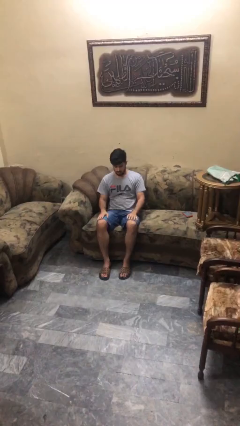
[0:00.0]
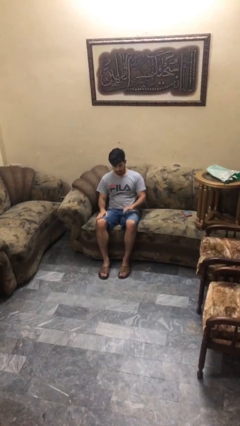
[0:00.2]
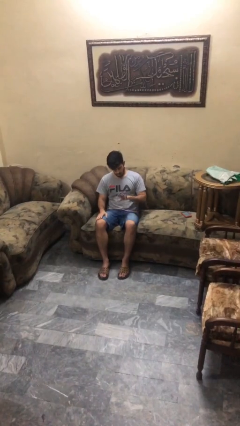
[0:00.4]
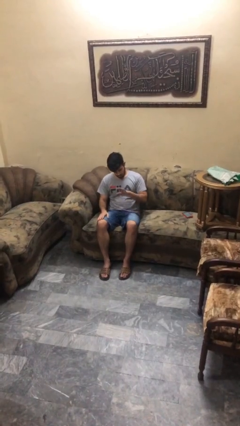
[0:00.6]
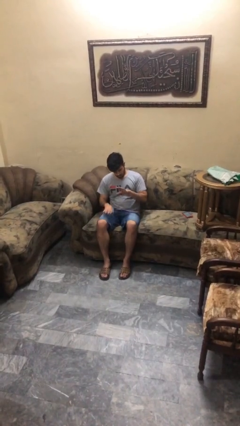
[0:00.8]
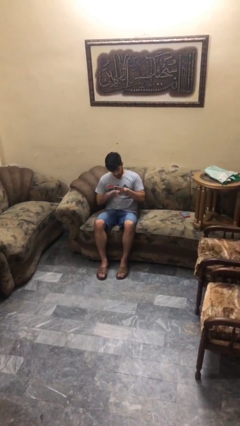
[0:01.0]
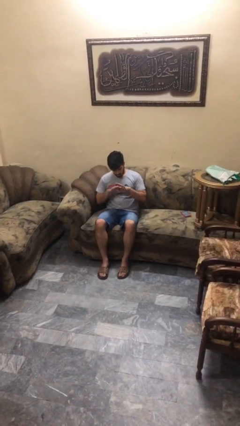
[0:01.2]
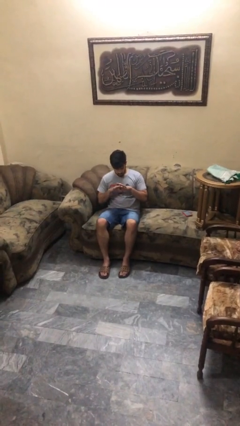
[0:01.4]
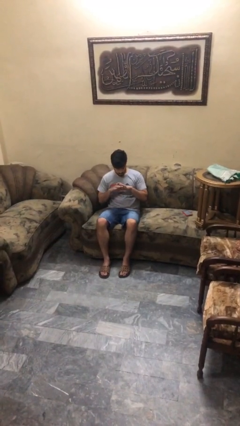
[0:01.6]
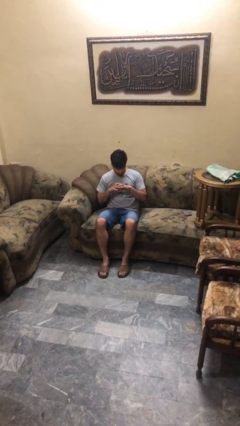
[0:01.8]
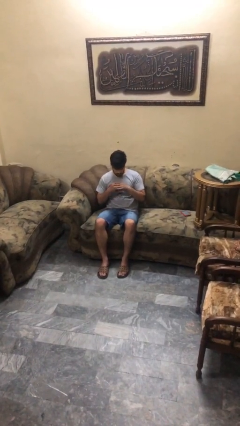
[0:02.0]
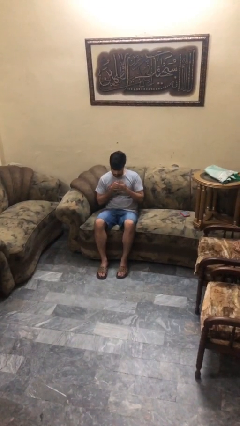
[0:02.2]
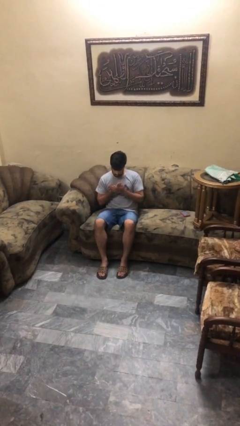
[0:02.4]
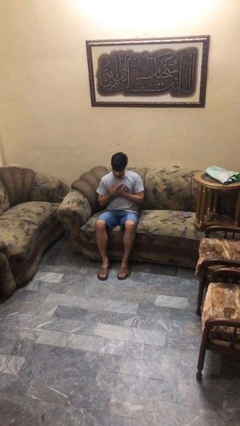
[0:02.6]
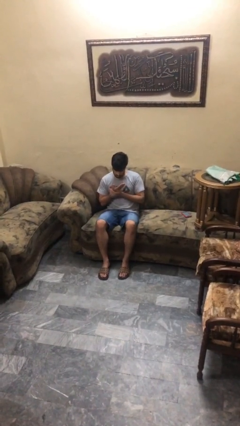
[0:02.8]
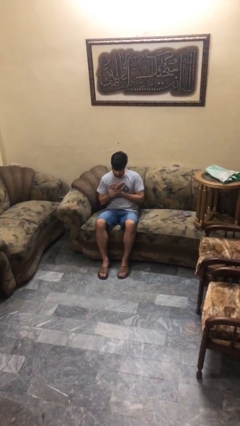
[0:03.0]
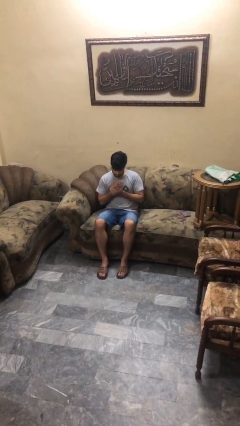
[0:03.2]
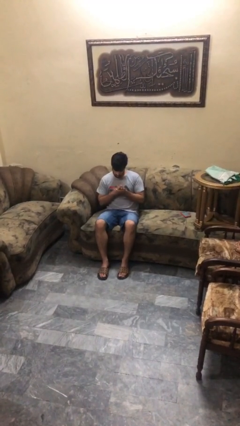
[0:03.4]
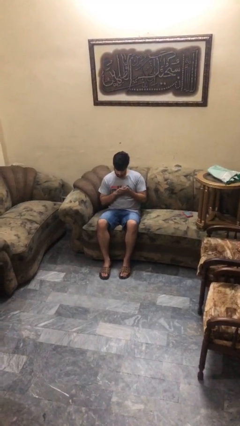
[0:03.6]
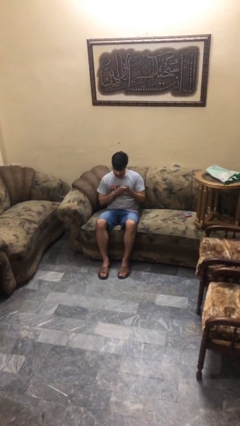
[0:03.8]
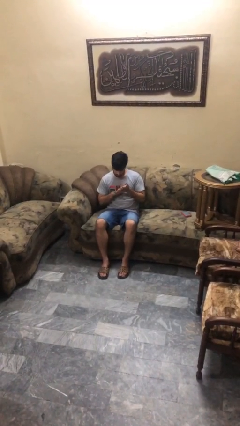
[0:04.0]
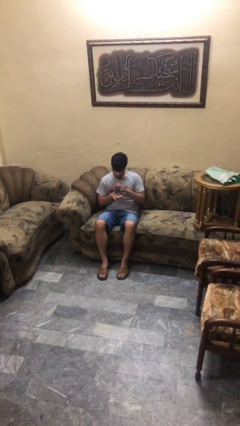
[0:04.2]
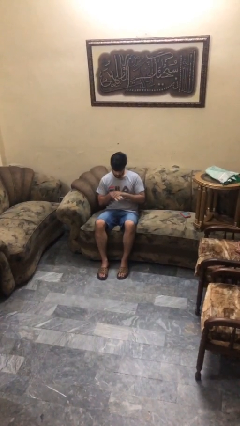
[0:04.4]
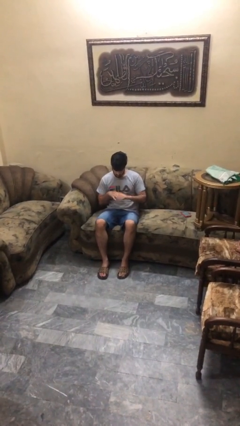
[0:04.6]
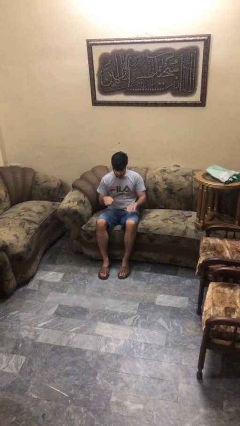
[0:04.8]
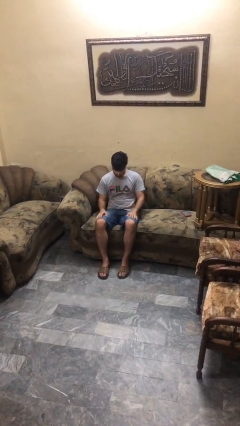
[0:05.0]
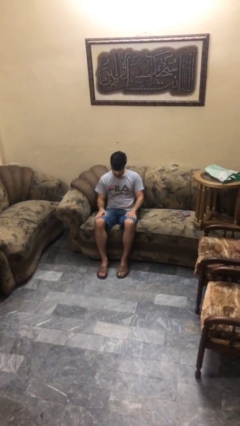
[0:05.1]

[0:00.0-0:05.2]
person looks at hands in lap

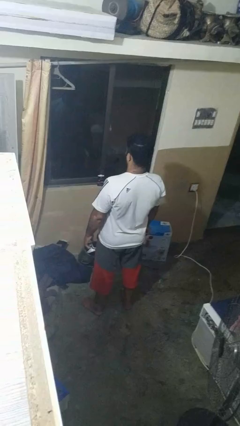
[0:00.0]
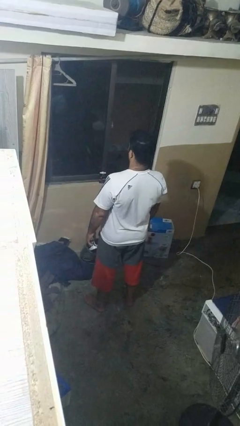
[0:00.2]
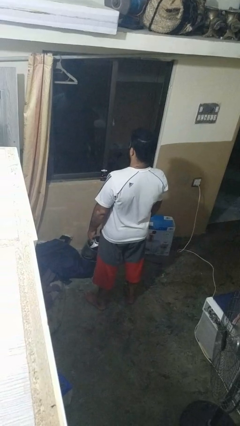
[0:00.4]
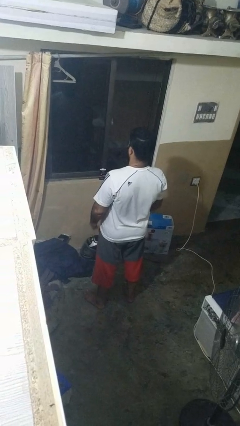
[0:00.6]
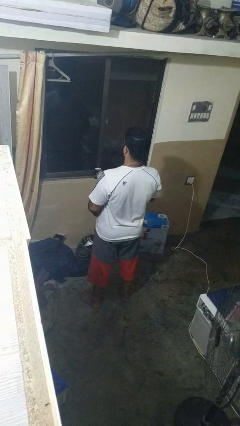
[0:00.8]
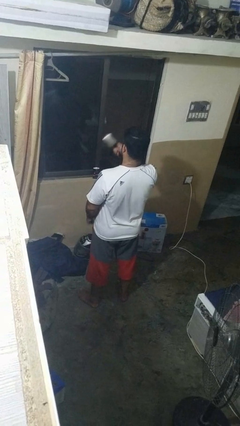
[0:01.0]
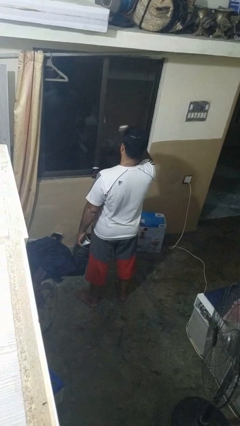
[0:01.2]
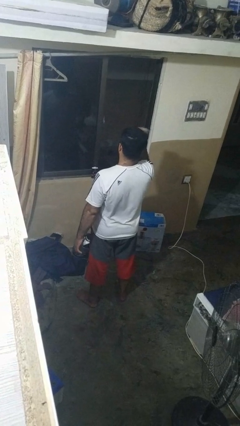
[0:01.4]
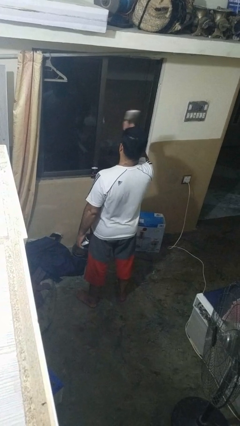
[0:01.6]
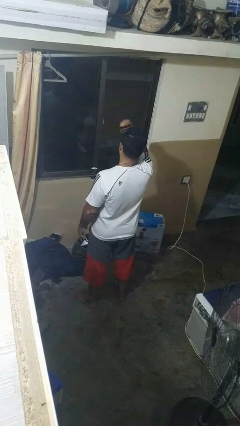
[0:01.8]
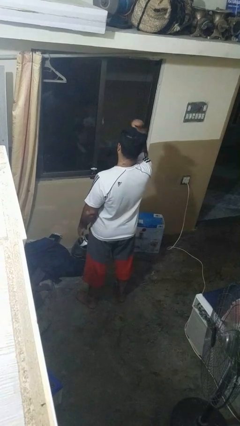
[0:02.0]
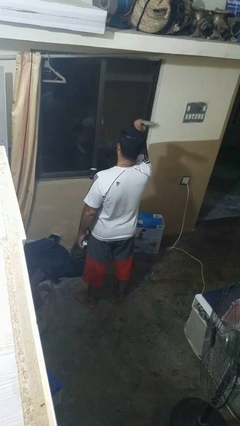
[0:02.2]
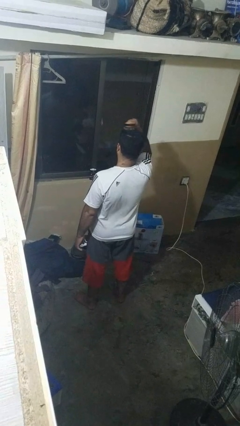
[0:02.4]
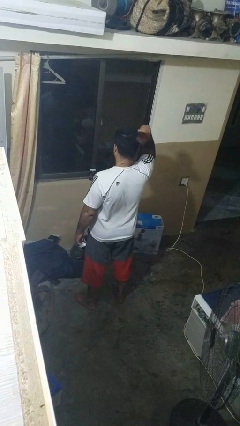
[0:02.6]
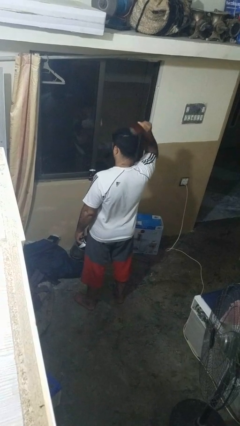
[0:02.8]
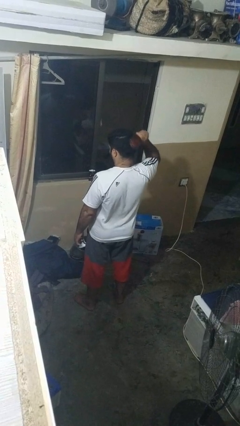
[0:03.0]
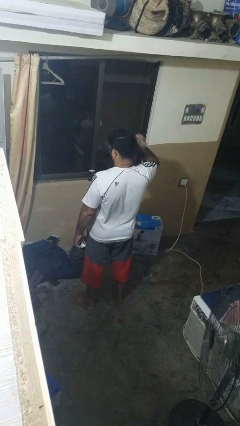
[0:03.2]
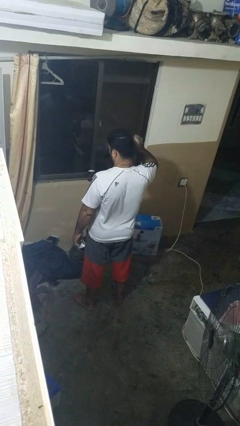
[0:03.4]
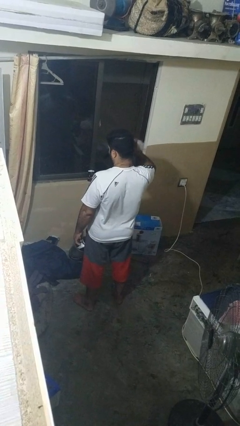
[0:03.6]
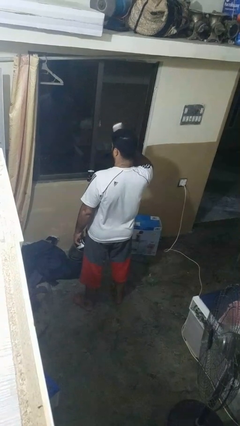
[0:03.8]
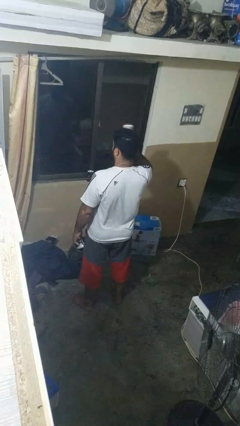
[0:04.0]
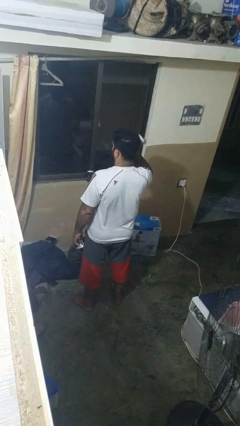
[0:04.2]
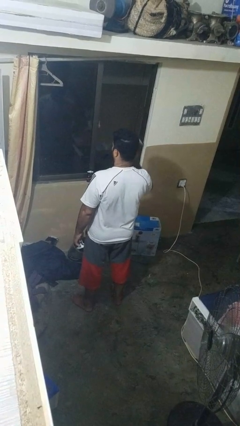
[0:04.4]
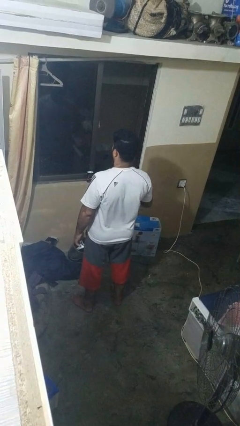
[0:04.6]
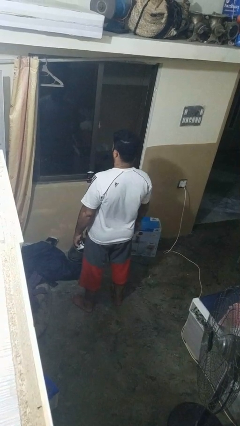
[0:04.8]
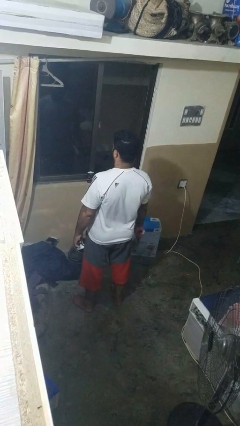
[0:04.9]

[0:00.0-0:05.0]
person brushes hair

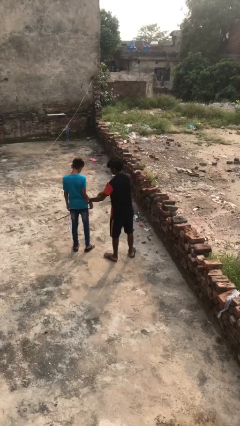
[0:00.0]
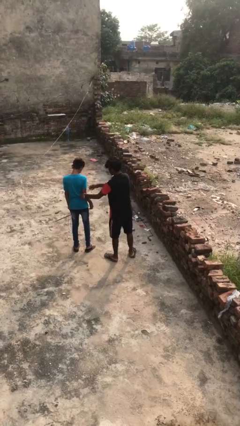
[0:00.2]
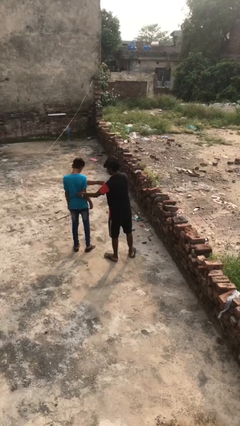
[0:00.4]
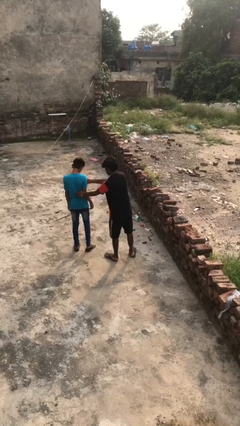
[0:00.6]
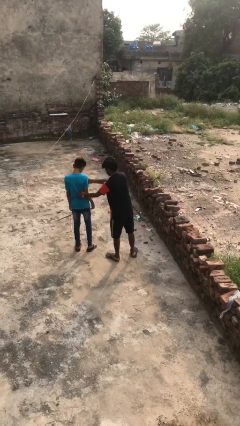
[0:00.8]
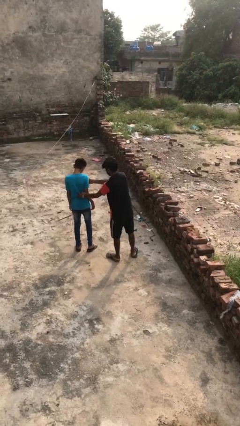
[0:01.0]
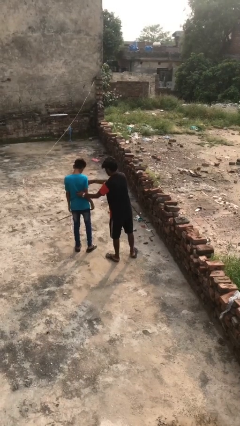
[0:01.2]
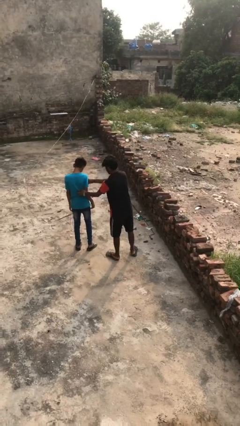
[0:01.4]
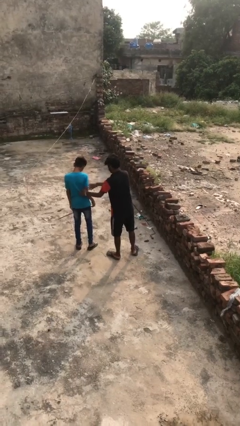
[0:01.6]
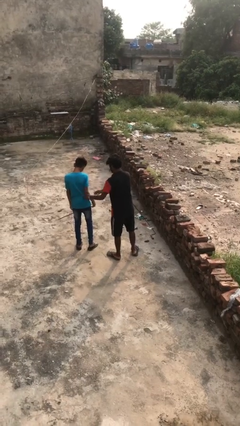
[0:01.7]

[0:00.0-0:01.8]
person tickles person

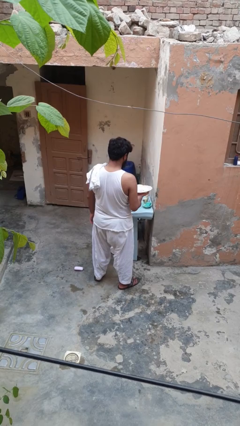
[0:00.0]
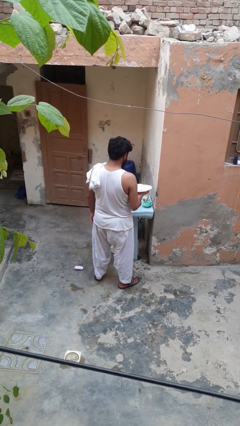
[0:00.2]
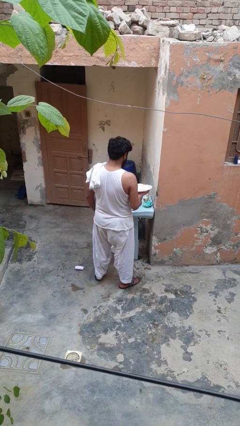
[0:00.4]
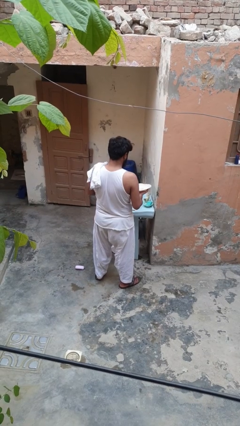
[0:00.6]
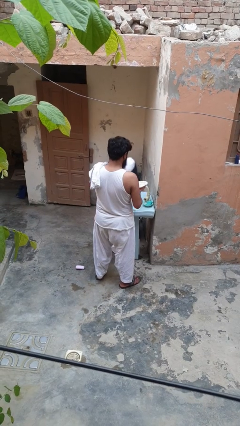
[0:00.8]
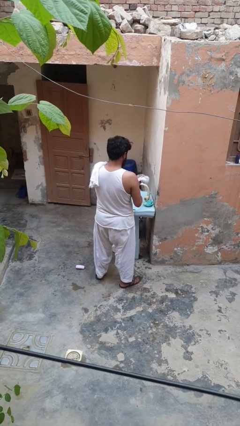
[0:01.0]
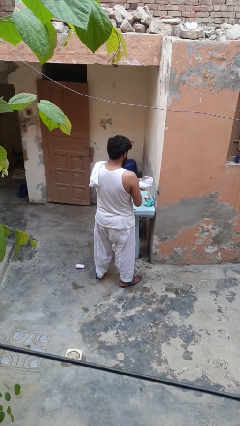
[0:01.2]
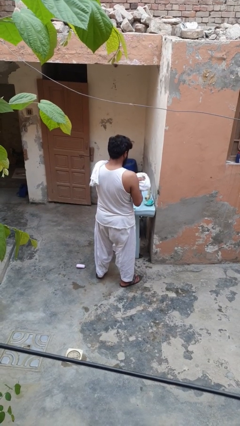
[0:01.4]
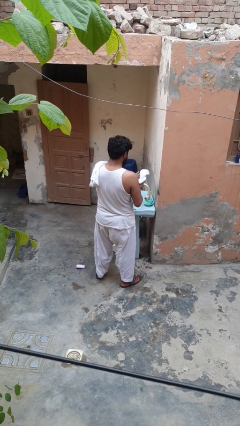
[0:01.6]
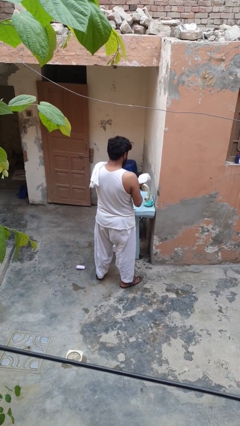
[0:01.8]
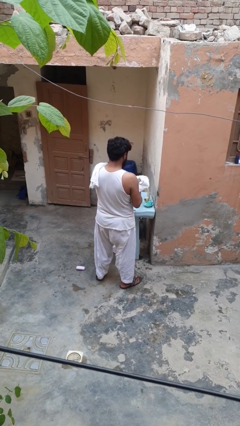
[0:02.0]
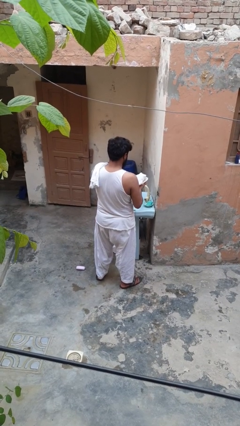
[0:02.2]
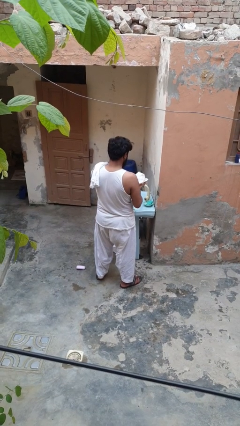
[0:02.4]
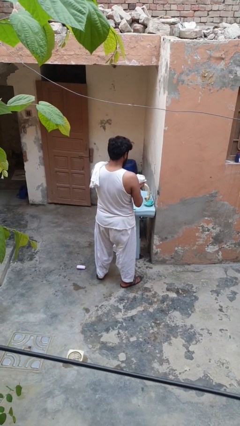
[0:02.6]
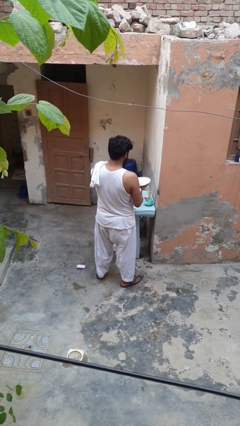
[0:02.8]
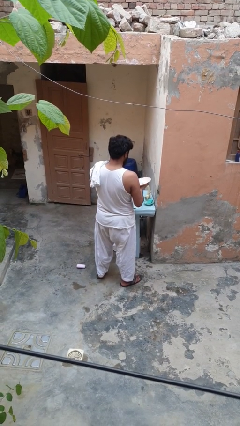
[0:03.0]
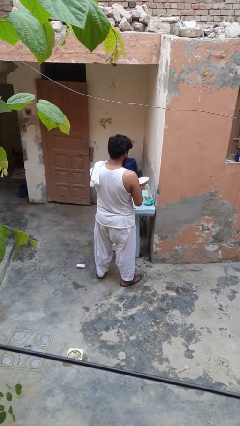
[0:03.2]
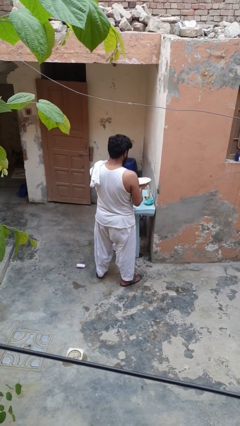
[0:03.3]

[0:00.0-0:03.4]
person dries dish

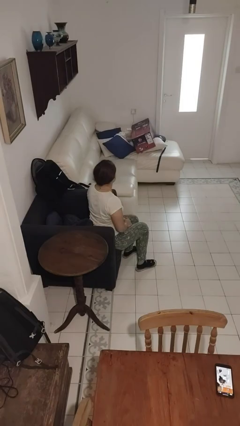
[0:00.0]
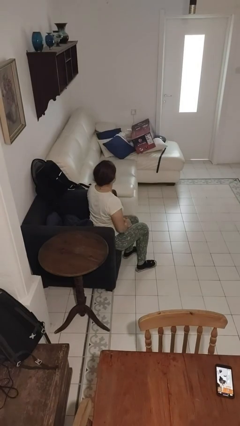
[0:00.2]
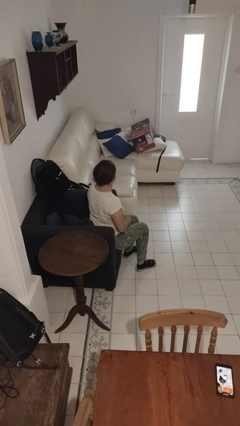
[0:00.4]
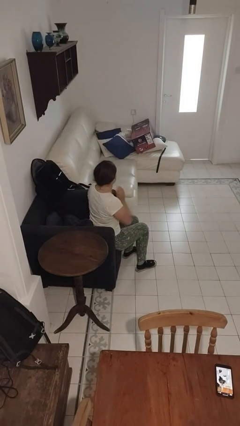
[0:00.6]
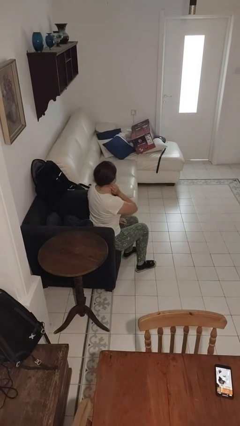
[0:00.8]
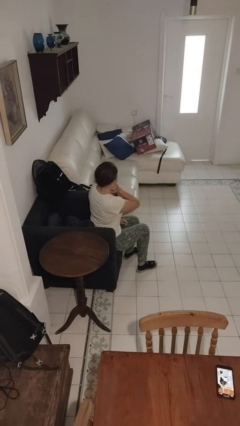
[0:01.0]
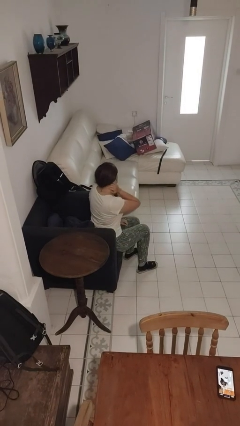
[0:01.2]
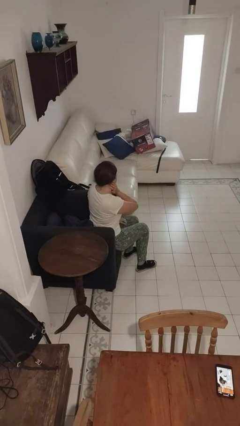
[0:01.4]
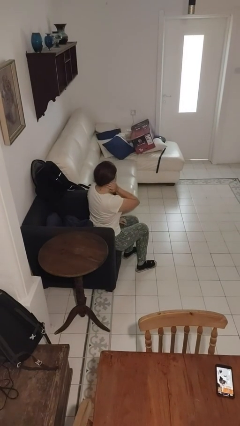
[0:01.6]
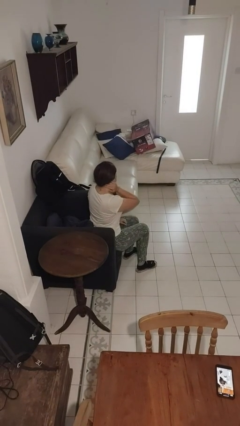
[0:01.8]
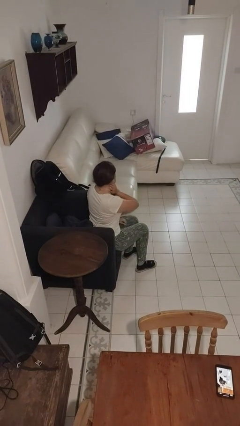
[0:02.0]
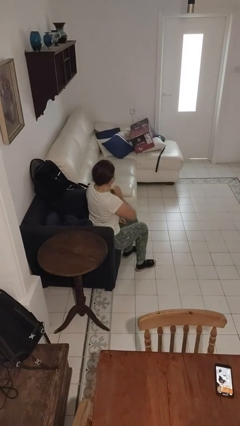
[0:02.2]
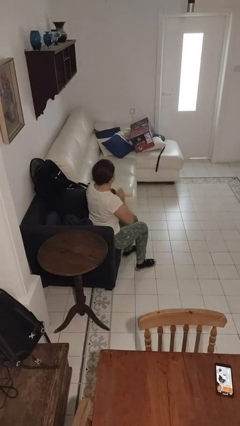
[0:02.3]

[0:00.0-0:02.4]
person rubs neck
